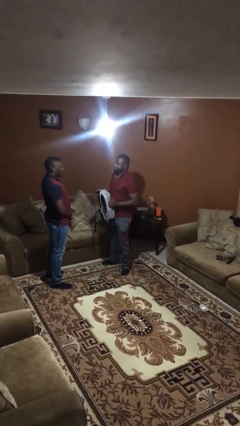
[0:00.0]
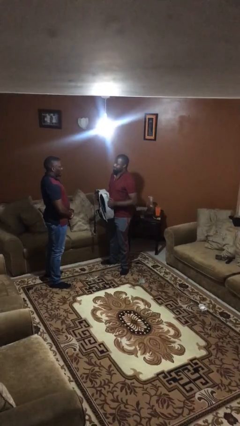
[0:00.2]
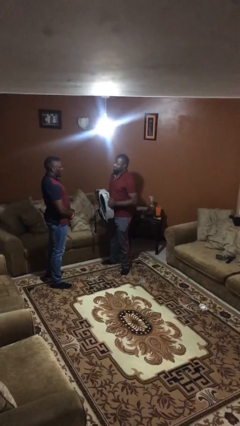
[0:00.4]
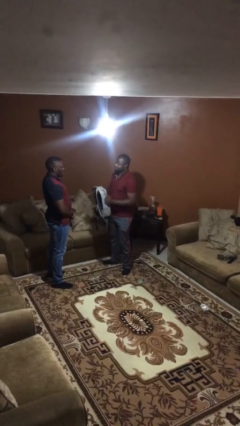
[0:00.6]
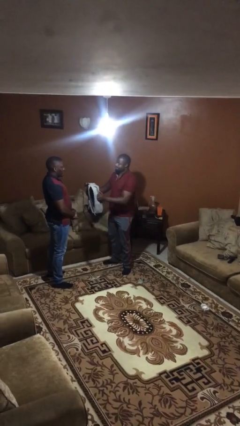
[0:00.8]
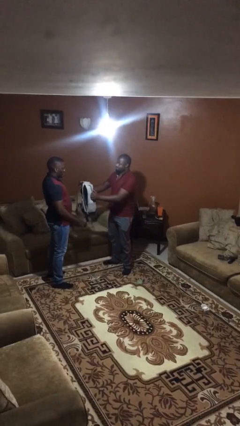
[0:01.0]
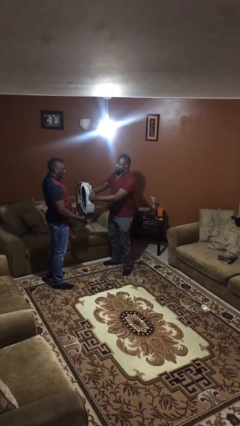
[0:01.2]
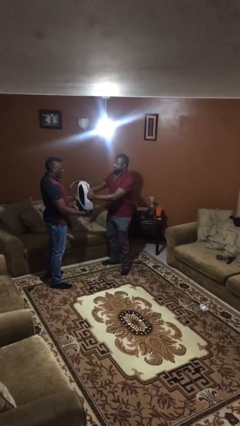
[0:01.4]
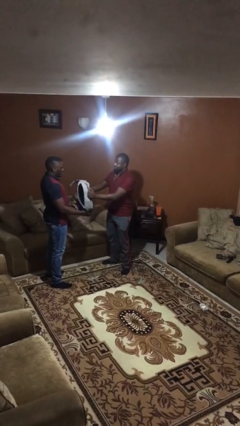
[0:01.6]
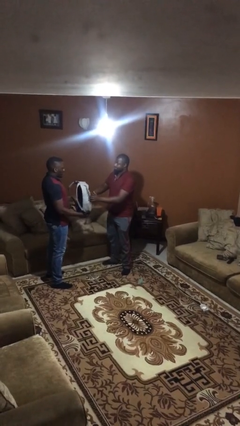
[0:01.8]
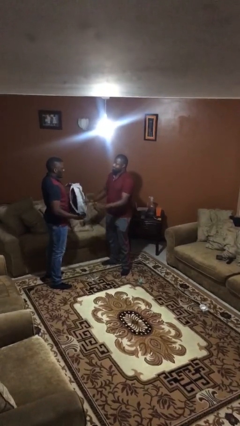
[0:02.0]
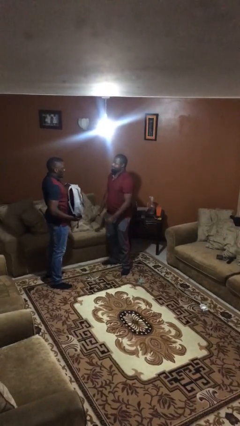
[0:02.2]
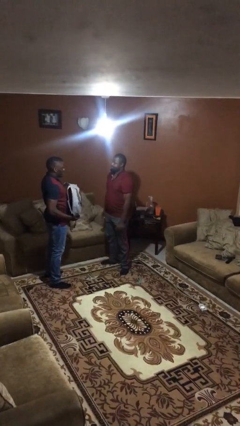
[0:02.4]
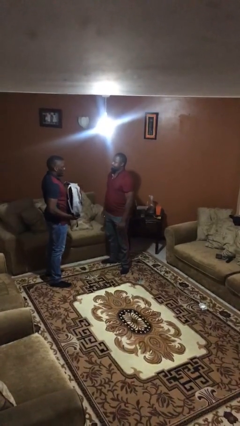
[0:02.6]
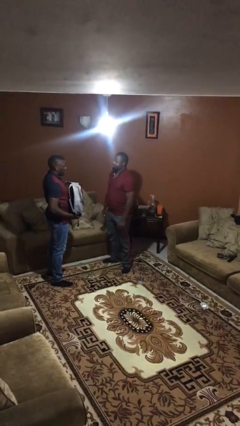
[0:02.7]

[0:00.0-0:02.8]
person transfers object to person

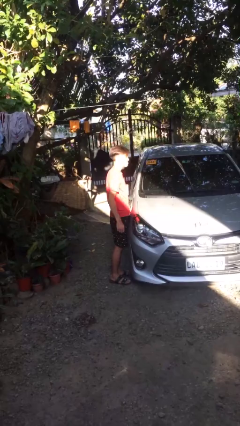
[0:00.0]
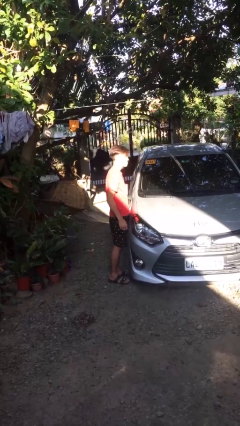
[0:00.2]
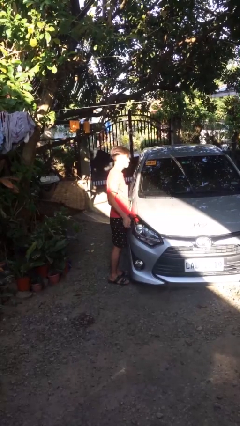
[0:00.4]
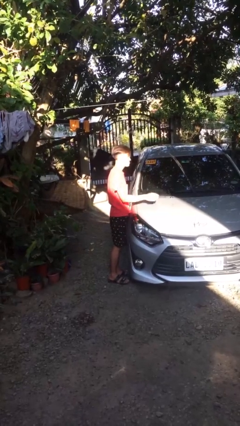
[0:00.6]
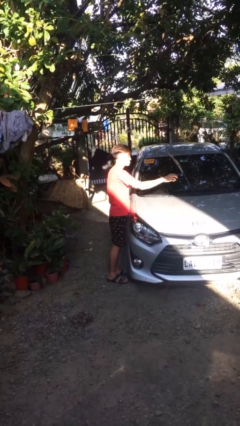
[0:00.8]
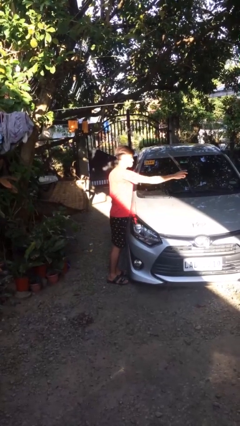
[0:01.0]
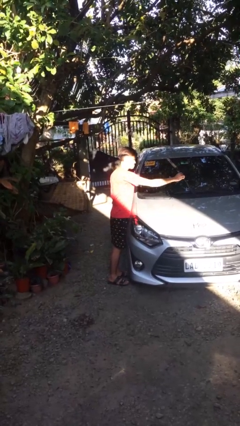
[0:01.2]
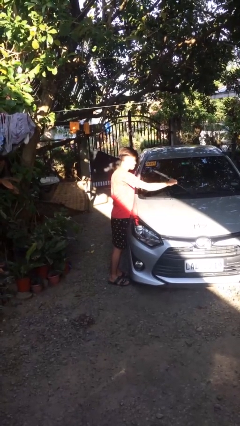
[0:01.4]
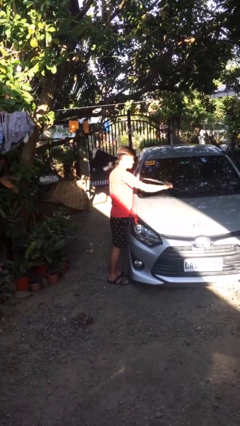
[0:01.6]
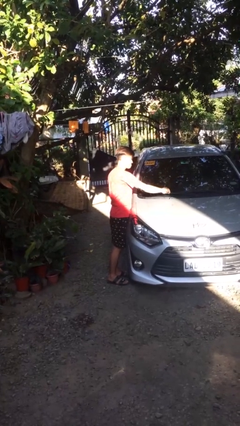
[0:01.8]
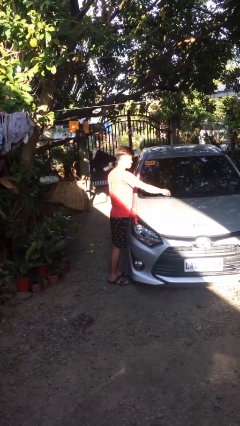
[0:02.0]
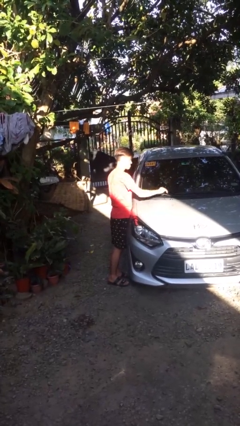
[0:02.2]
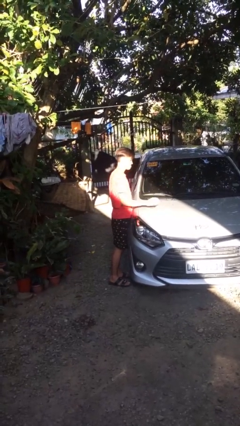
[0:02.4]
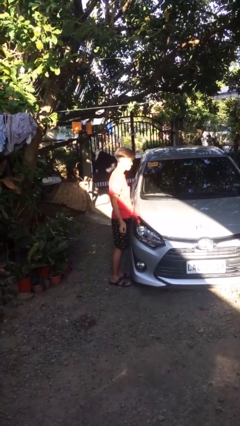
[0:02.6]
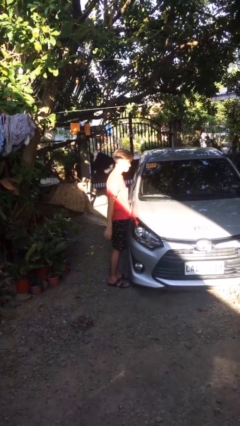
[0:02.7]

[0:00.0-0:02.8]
person flips down car wipers

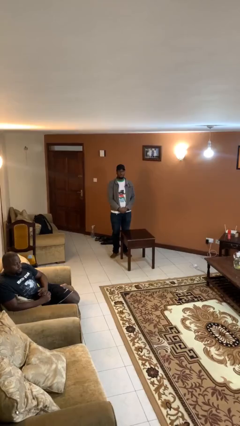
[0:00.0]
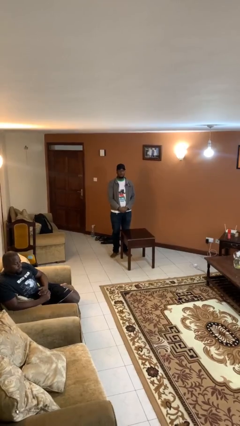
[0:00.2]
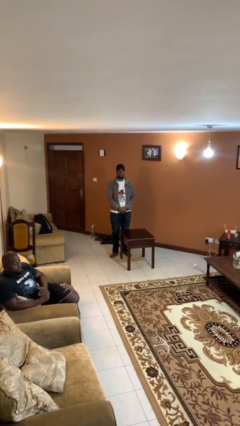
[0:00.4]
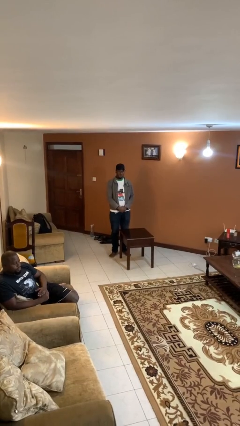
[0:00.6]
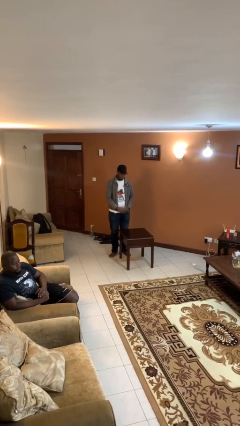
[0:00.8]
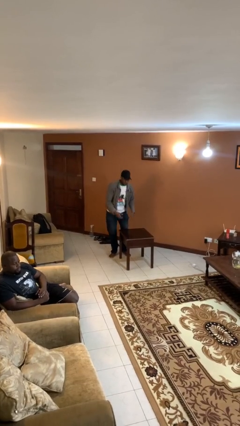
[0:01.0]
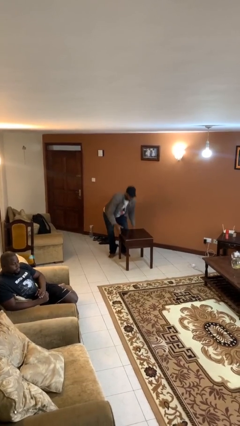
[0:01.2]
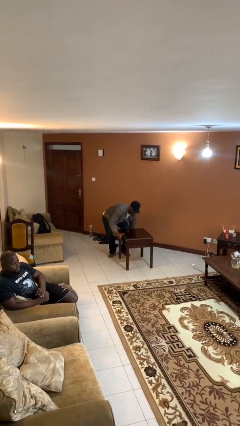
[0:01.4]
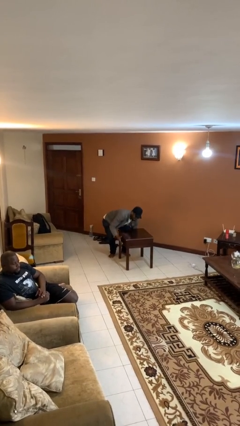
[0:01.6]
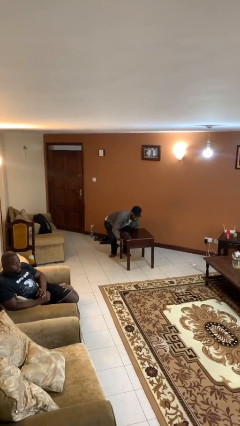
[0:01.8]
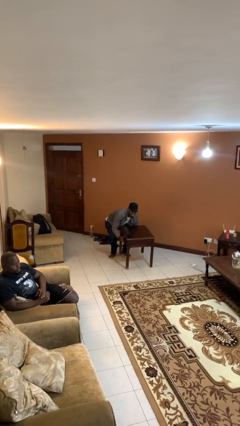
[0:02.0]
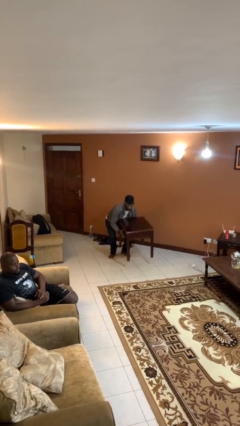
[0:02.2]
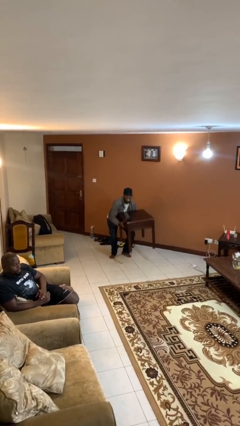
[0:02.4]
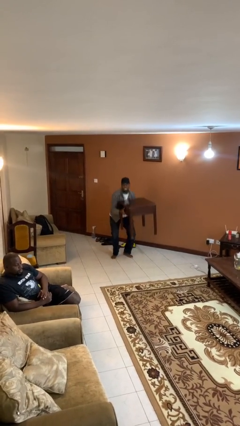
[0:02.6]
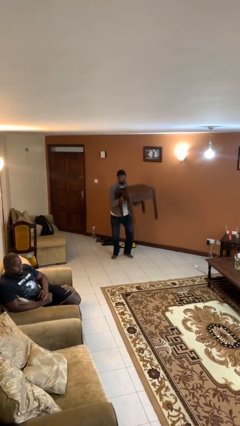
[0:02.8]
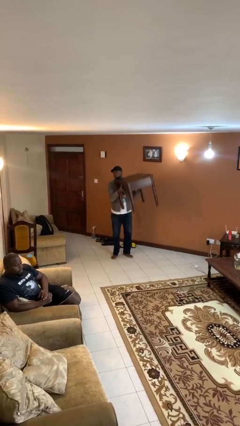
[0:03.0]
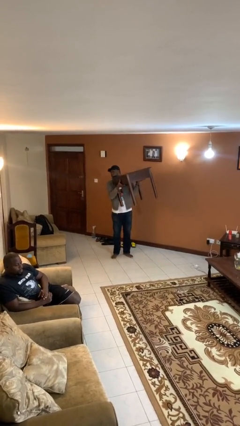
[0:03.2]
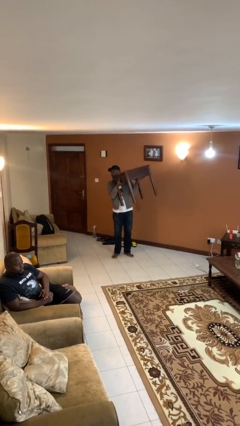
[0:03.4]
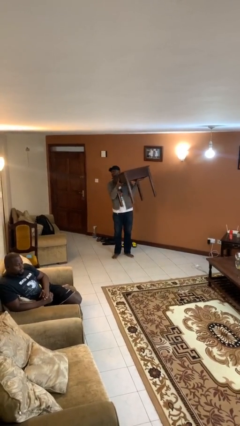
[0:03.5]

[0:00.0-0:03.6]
person picks up object from floor

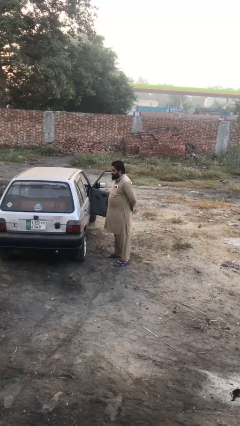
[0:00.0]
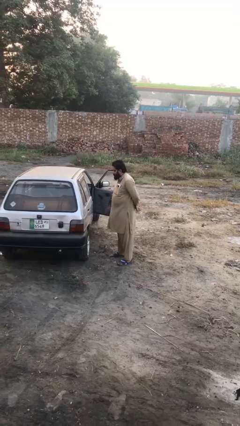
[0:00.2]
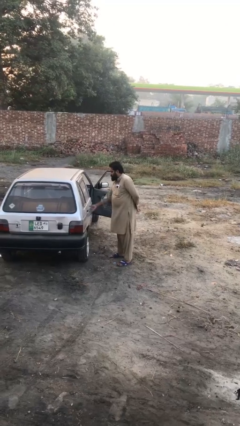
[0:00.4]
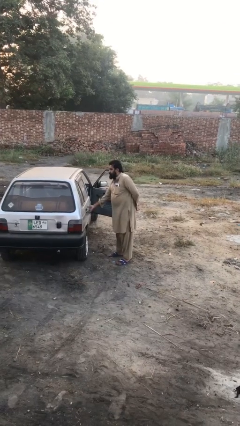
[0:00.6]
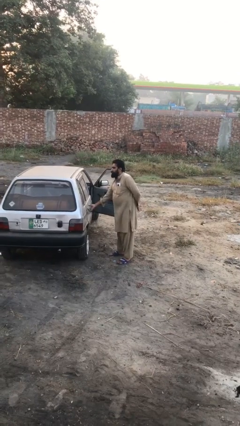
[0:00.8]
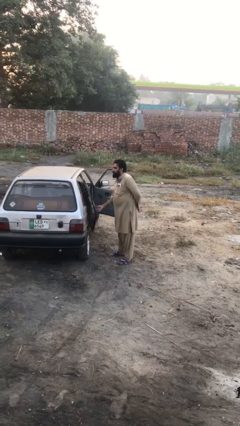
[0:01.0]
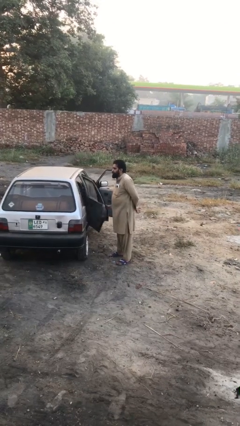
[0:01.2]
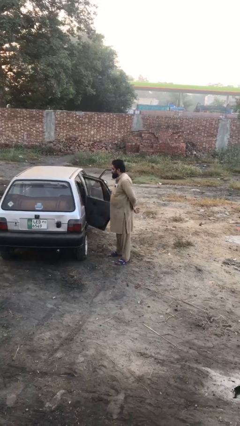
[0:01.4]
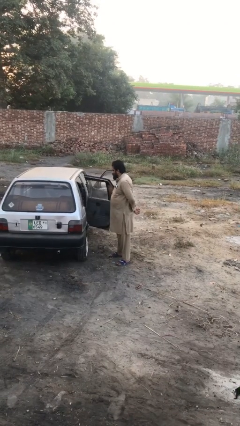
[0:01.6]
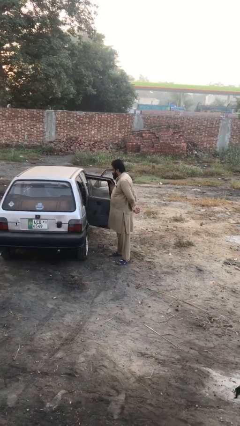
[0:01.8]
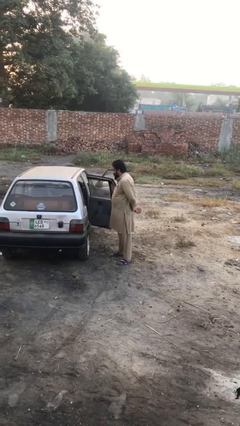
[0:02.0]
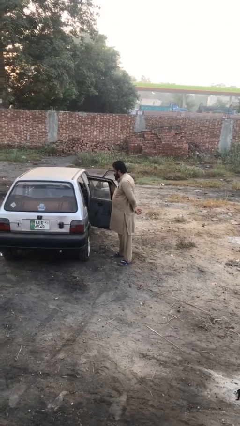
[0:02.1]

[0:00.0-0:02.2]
person opens car door

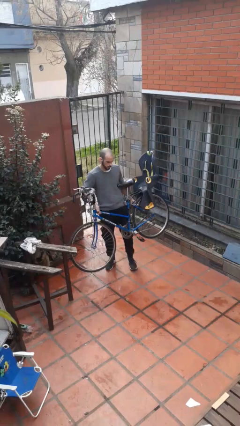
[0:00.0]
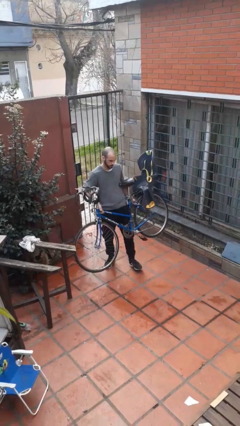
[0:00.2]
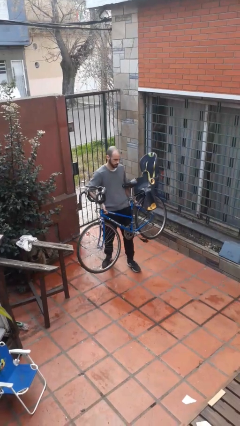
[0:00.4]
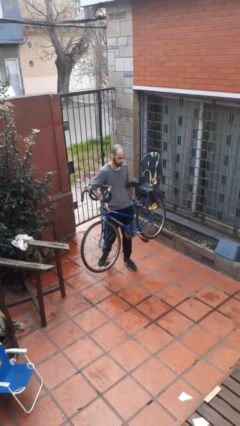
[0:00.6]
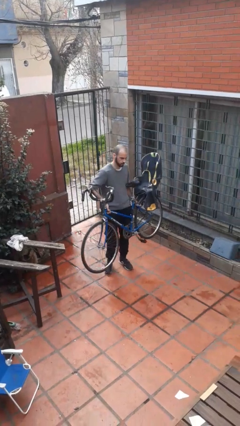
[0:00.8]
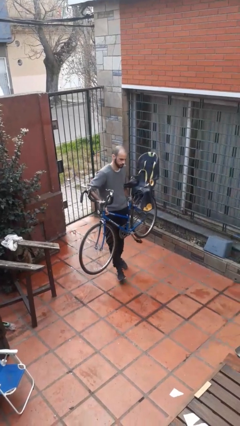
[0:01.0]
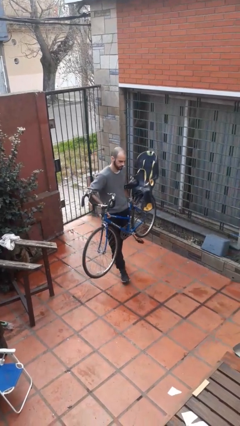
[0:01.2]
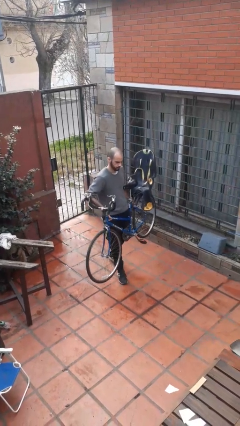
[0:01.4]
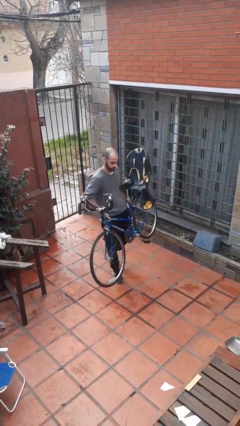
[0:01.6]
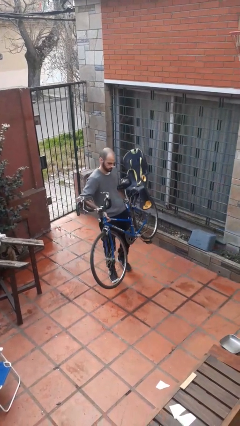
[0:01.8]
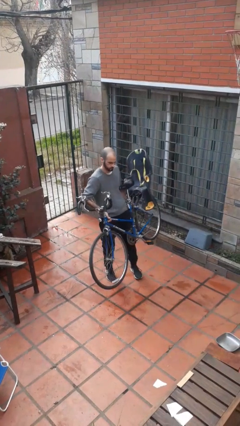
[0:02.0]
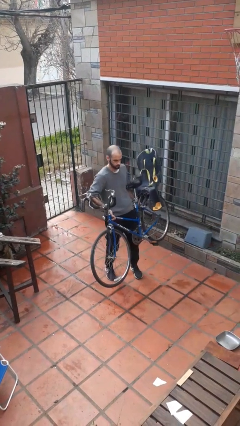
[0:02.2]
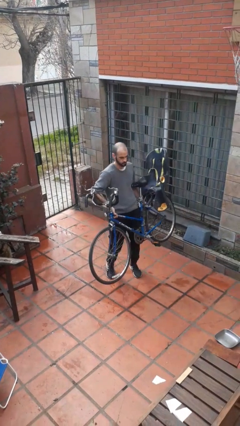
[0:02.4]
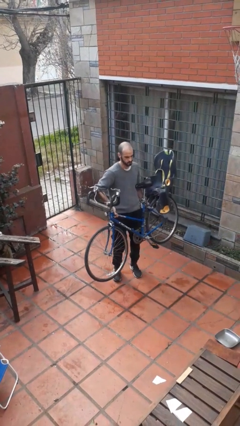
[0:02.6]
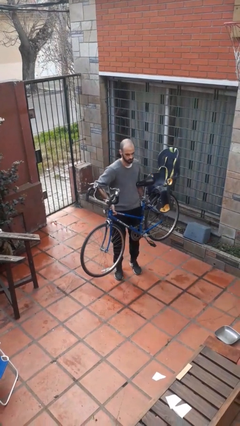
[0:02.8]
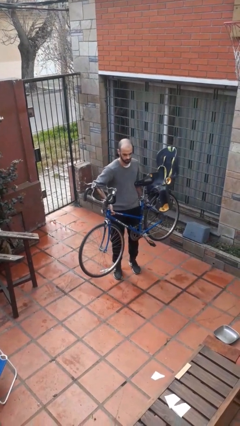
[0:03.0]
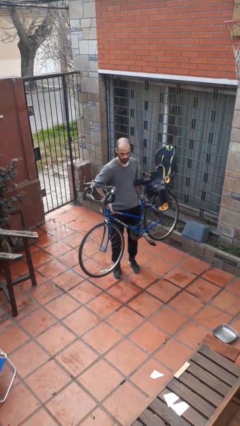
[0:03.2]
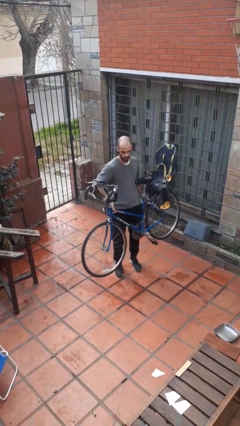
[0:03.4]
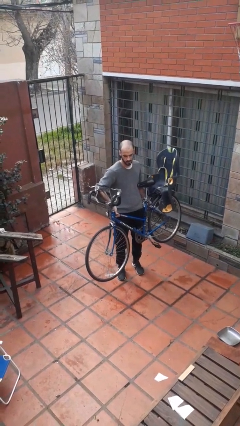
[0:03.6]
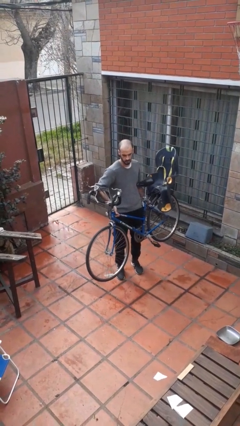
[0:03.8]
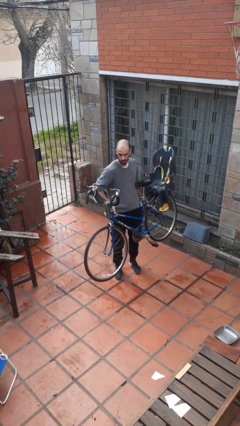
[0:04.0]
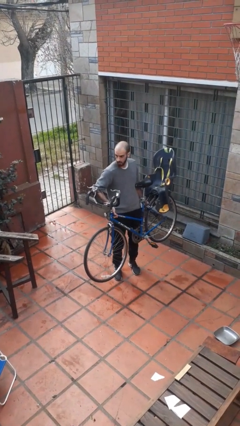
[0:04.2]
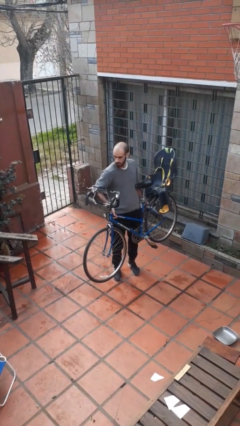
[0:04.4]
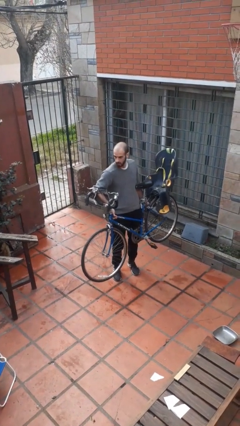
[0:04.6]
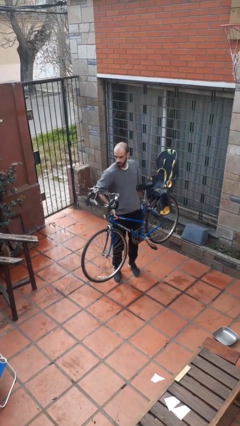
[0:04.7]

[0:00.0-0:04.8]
person carries bicycle

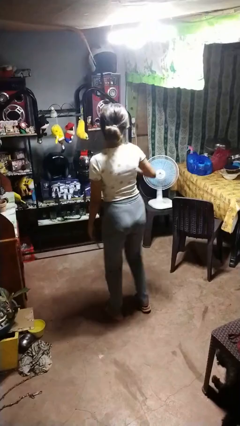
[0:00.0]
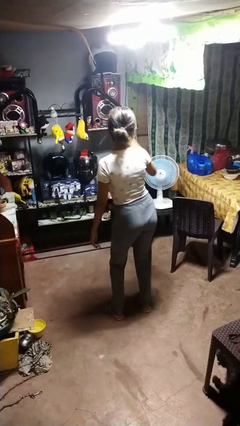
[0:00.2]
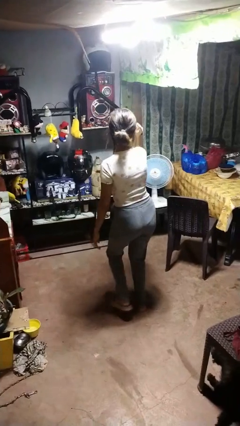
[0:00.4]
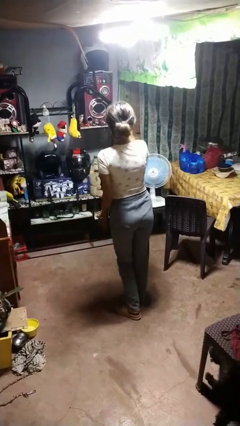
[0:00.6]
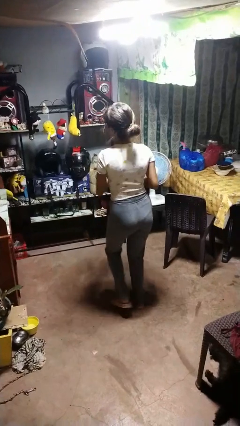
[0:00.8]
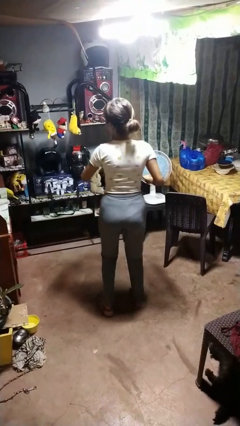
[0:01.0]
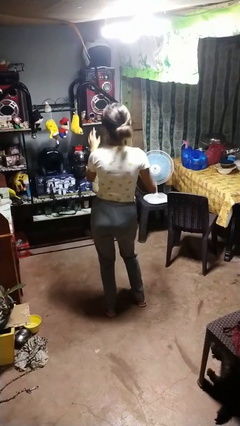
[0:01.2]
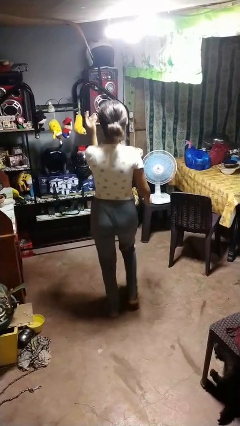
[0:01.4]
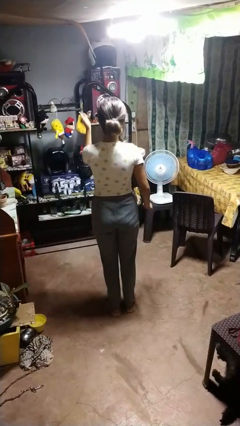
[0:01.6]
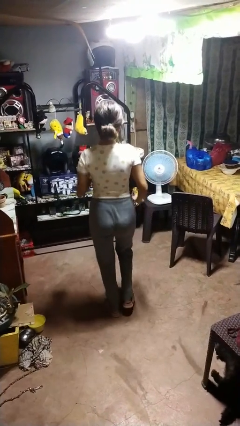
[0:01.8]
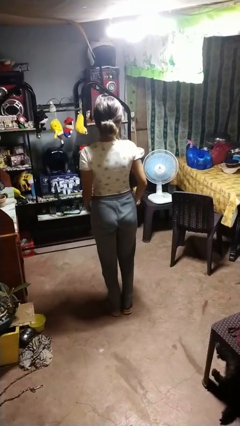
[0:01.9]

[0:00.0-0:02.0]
person dances in place
